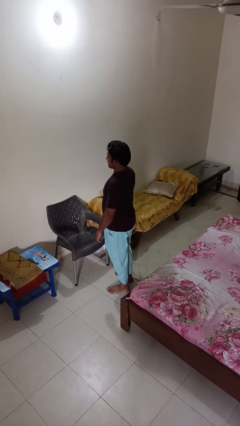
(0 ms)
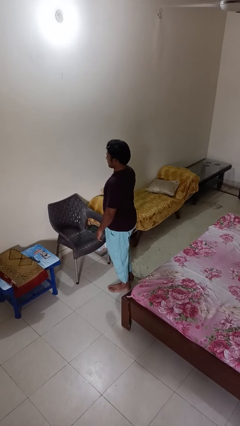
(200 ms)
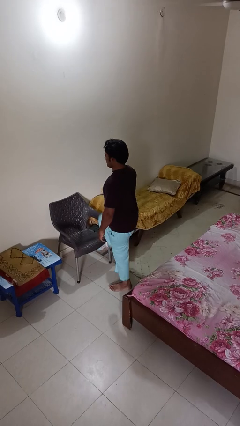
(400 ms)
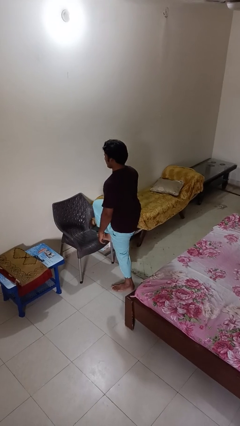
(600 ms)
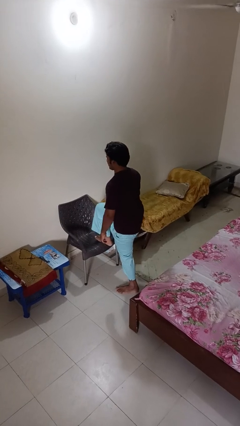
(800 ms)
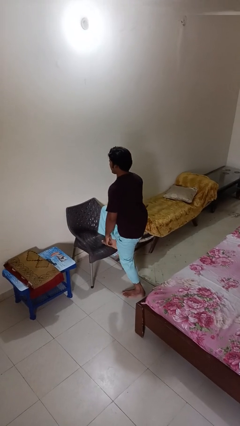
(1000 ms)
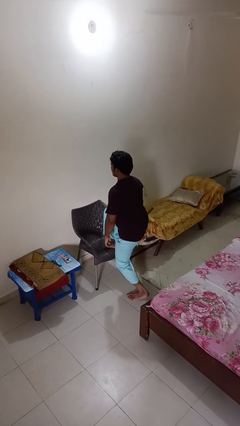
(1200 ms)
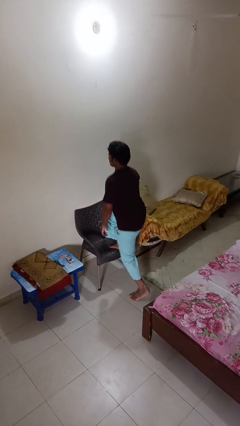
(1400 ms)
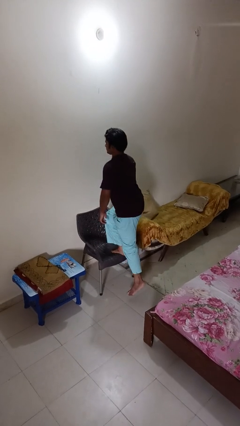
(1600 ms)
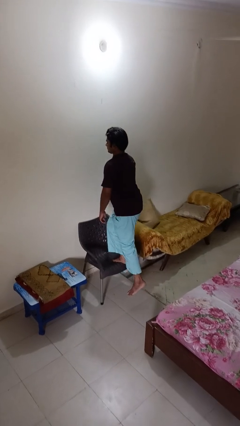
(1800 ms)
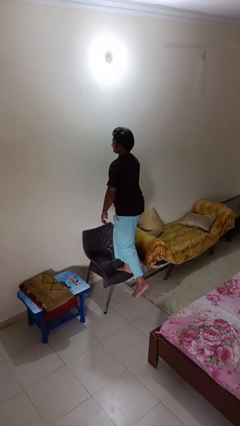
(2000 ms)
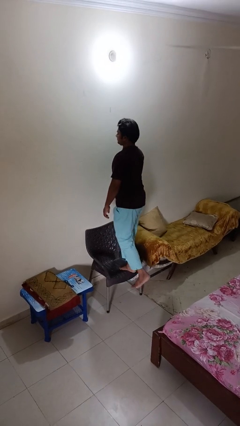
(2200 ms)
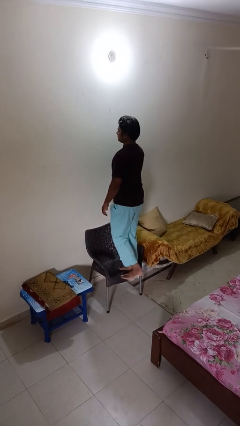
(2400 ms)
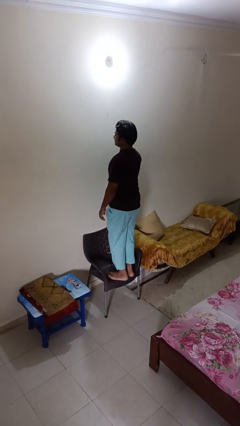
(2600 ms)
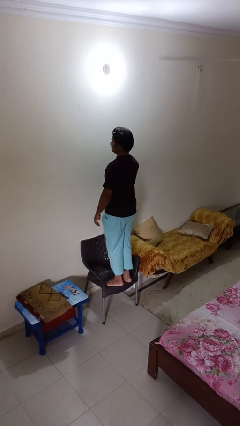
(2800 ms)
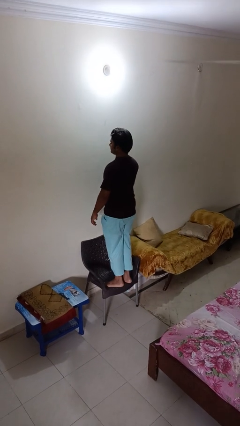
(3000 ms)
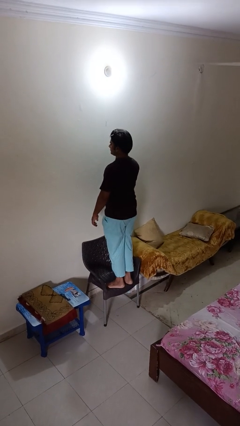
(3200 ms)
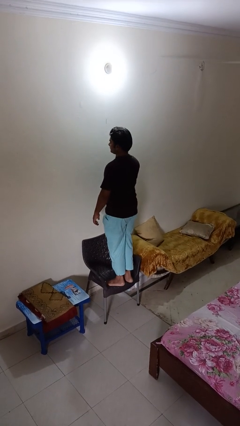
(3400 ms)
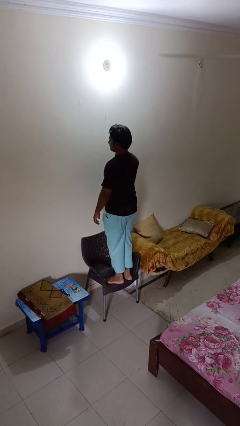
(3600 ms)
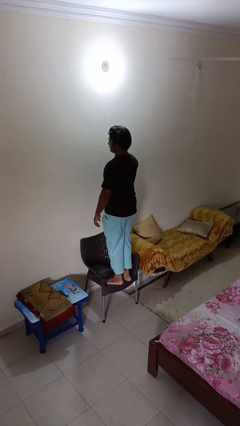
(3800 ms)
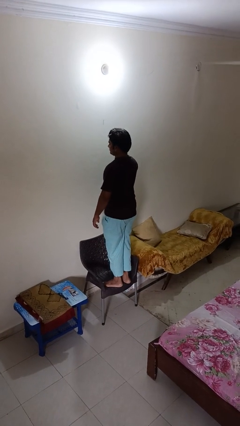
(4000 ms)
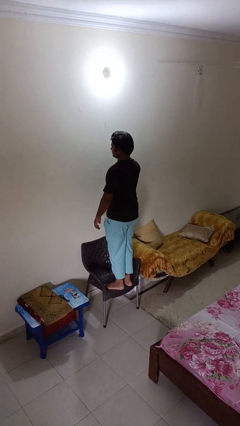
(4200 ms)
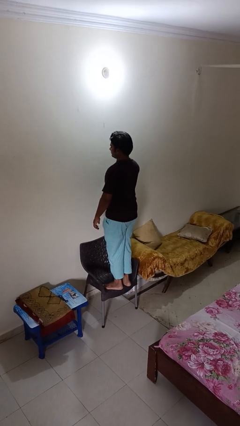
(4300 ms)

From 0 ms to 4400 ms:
person climbs on chair

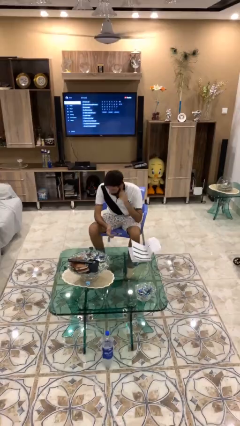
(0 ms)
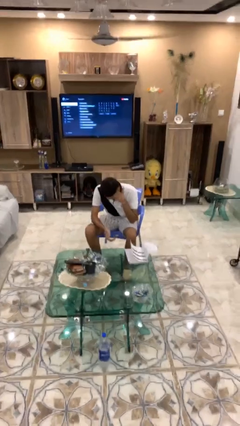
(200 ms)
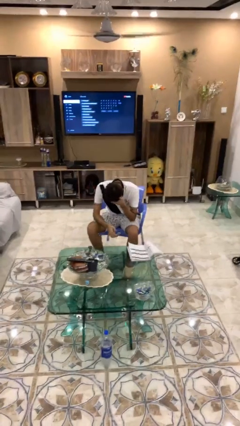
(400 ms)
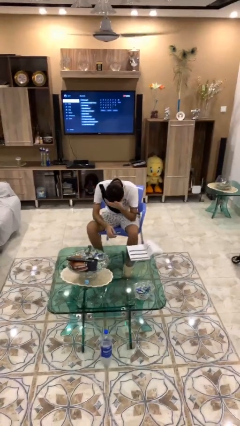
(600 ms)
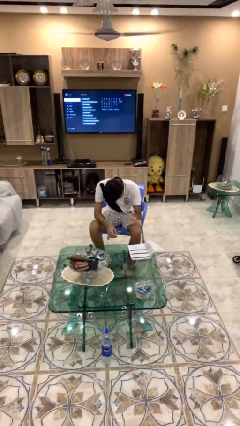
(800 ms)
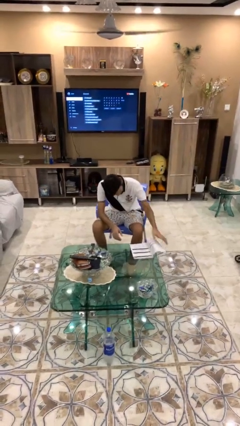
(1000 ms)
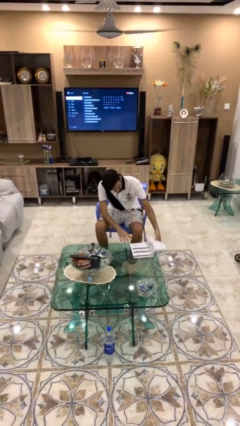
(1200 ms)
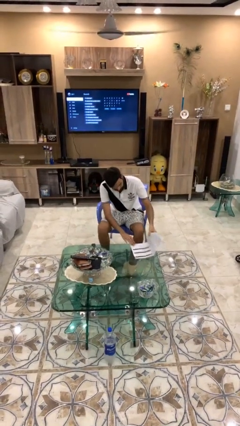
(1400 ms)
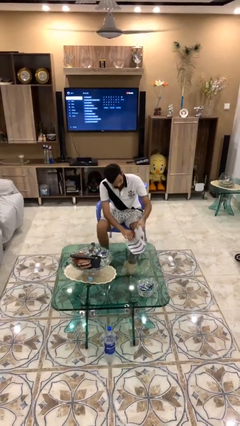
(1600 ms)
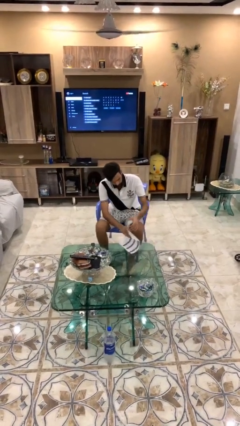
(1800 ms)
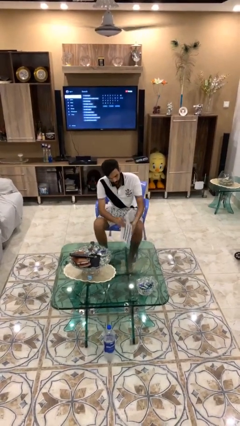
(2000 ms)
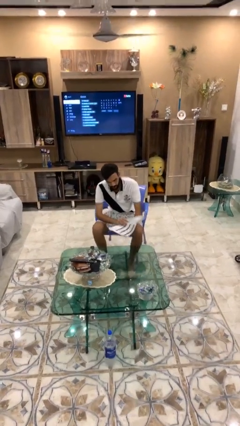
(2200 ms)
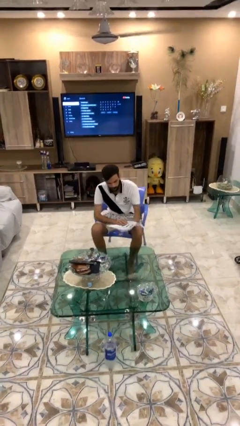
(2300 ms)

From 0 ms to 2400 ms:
person picks up object from table

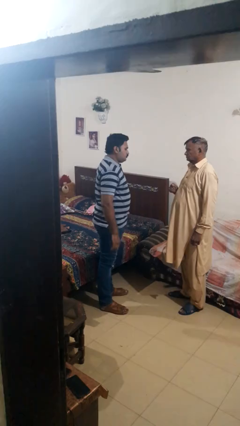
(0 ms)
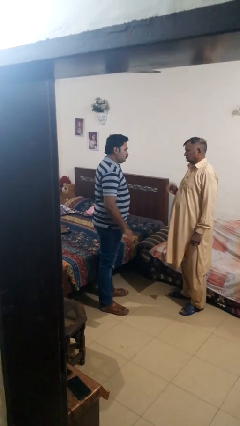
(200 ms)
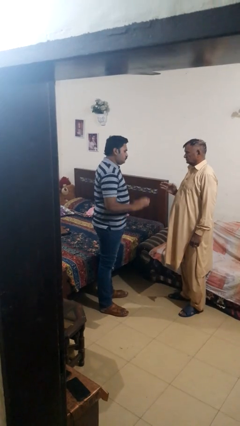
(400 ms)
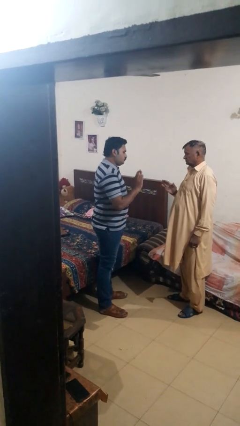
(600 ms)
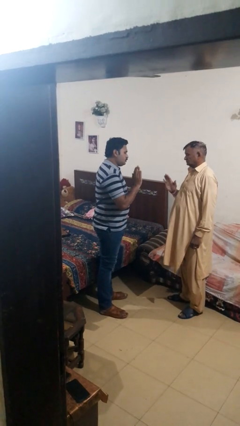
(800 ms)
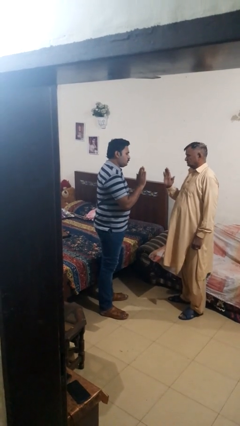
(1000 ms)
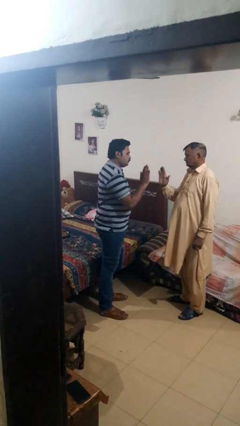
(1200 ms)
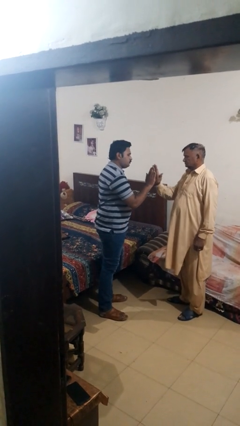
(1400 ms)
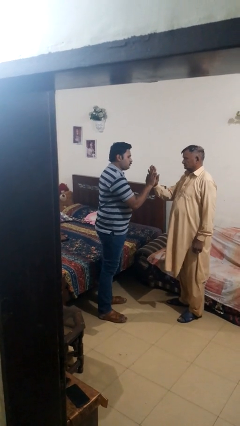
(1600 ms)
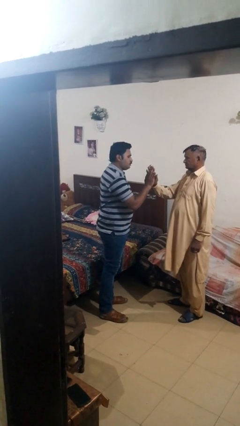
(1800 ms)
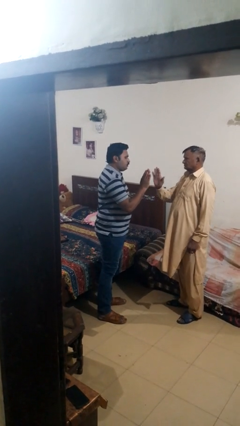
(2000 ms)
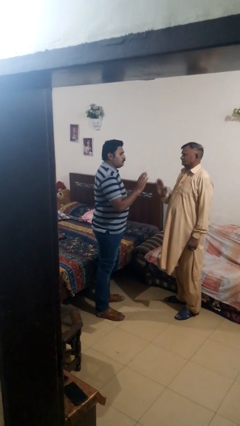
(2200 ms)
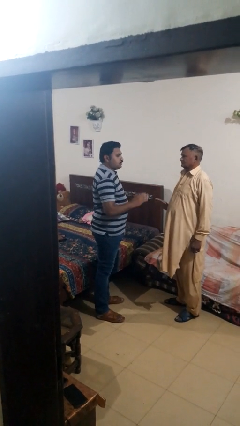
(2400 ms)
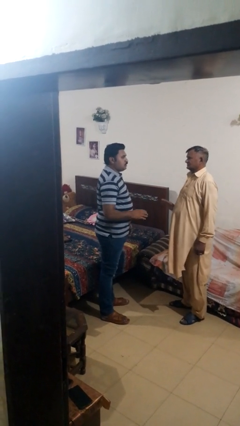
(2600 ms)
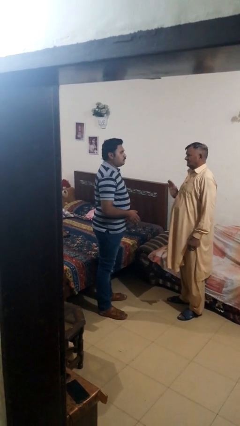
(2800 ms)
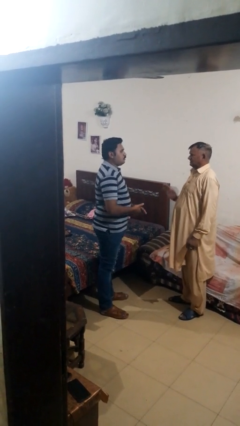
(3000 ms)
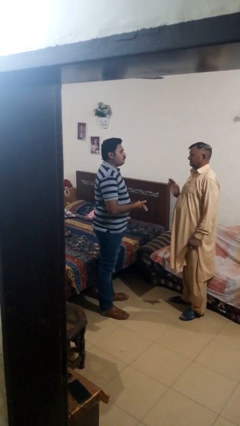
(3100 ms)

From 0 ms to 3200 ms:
person highfives hand

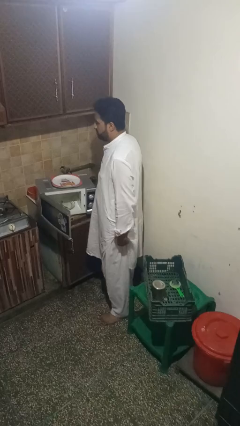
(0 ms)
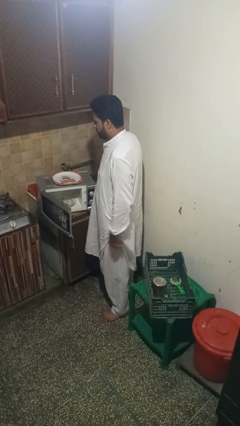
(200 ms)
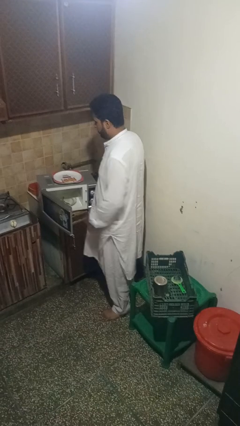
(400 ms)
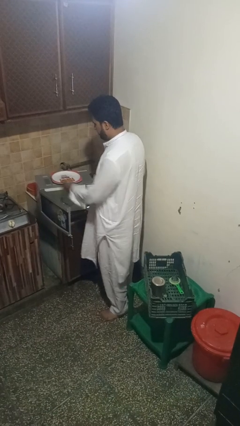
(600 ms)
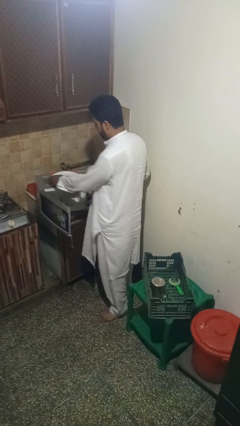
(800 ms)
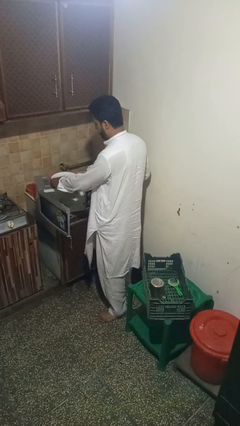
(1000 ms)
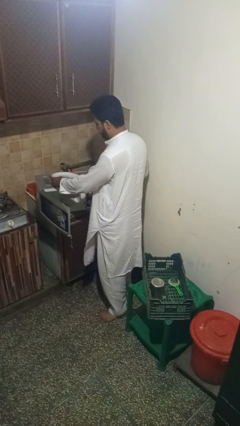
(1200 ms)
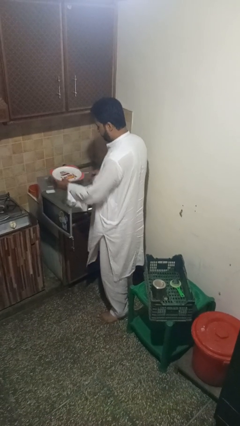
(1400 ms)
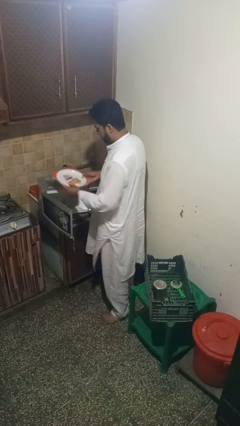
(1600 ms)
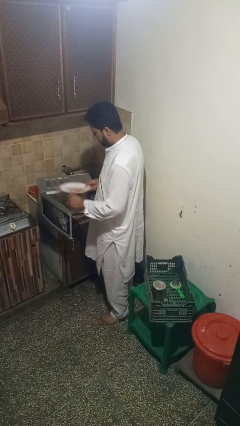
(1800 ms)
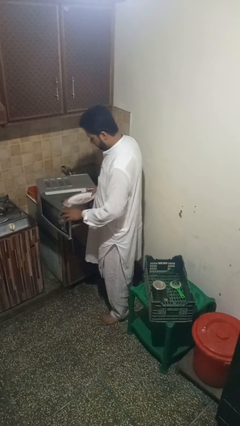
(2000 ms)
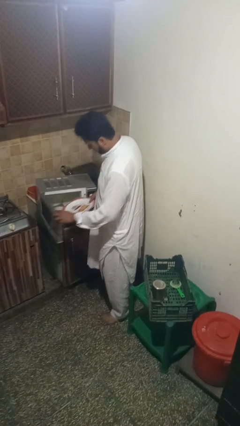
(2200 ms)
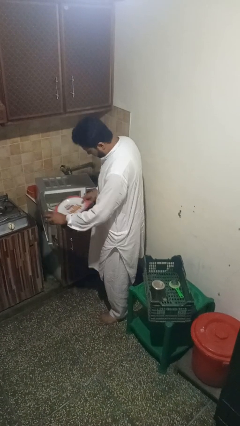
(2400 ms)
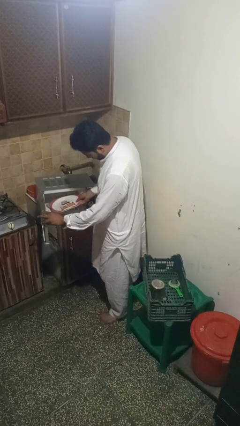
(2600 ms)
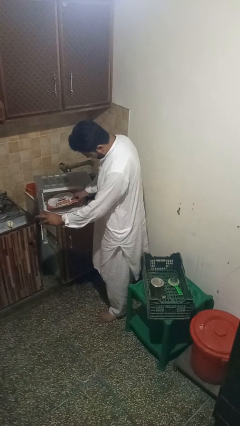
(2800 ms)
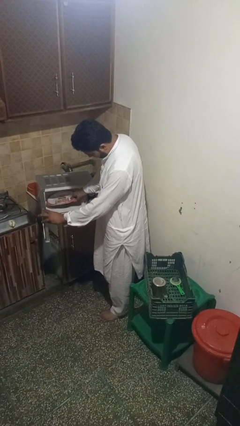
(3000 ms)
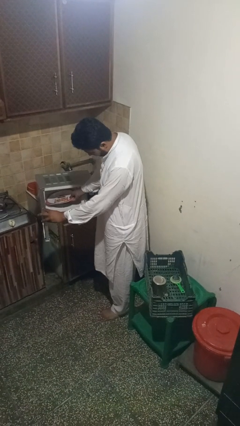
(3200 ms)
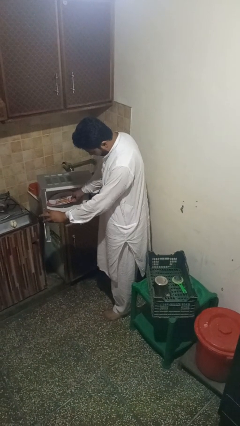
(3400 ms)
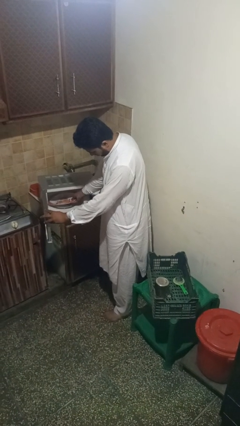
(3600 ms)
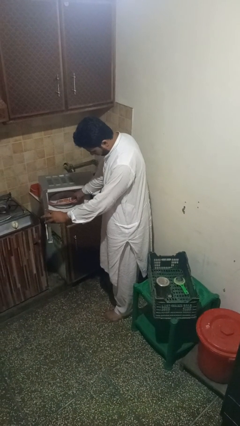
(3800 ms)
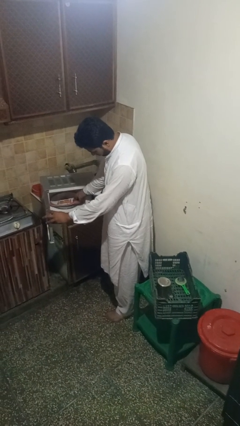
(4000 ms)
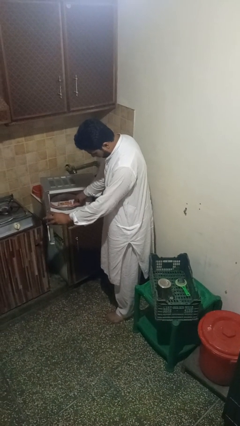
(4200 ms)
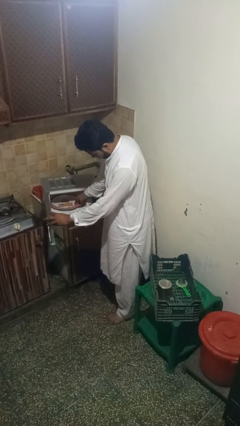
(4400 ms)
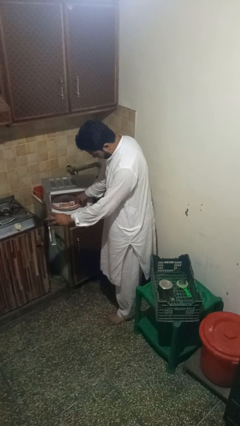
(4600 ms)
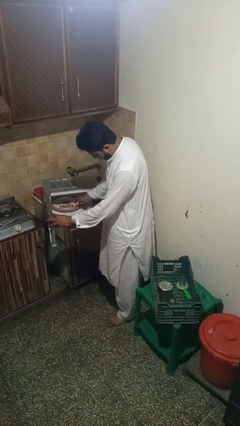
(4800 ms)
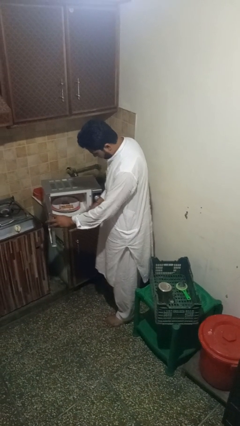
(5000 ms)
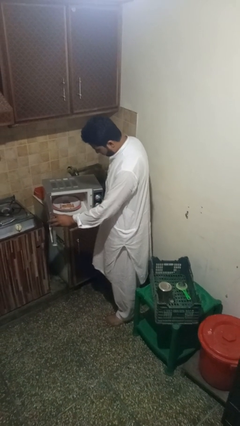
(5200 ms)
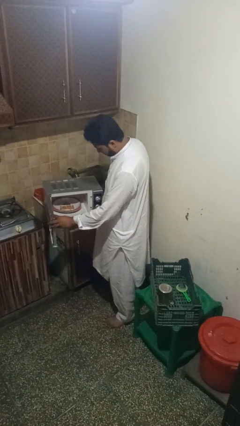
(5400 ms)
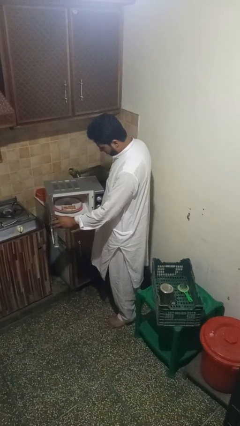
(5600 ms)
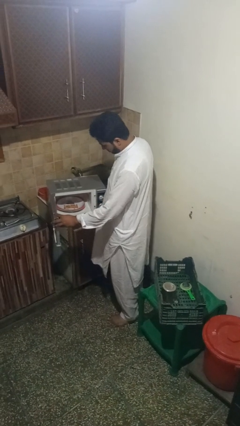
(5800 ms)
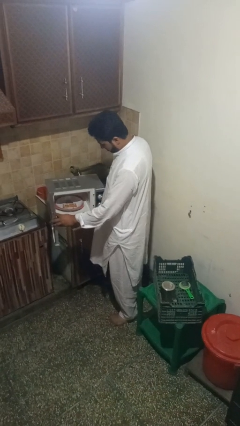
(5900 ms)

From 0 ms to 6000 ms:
person puts object into microwave

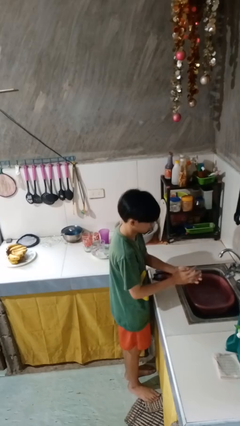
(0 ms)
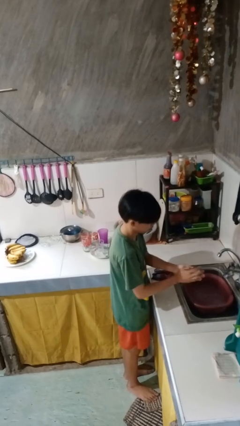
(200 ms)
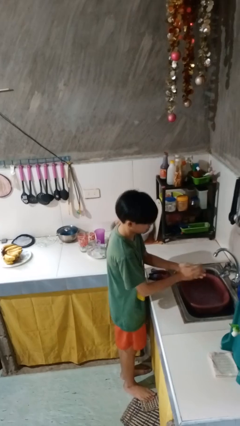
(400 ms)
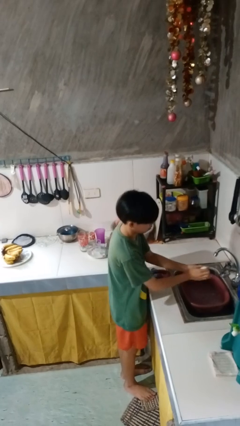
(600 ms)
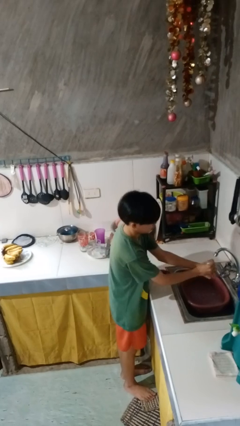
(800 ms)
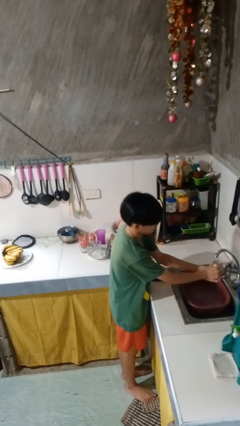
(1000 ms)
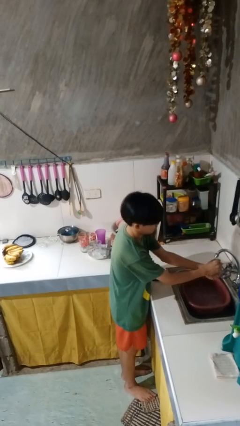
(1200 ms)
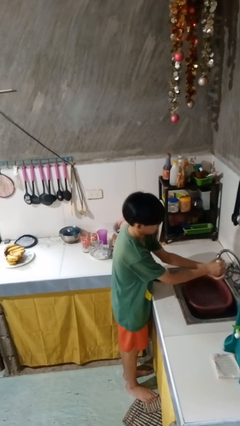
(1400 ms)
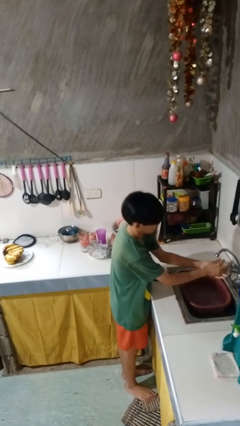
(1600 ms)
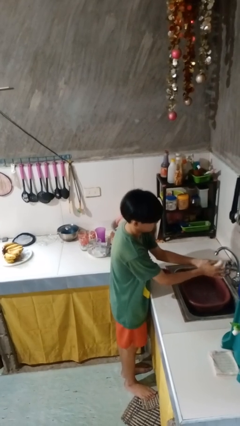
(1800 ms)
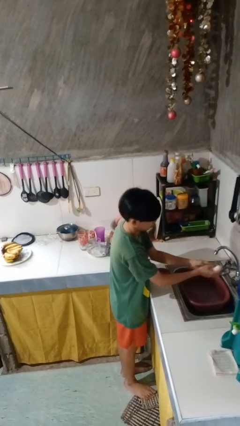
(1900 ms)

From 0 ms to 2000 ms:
person washes hands
